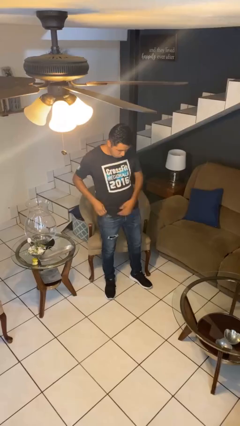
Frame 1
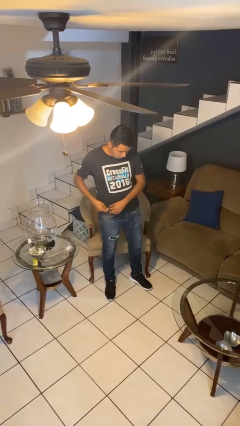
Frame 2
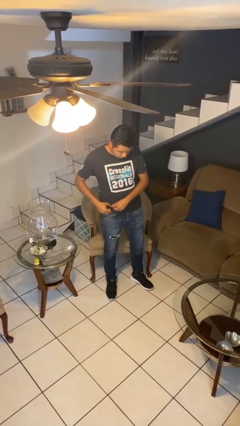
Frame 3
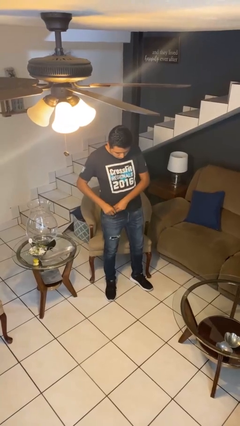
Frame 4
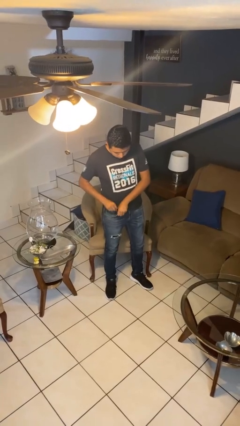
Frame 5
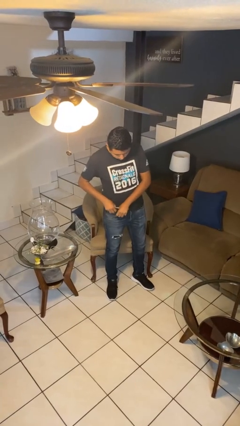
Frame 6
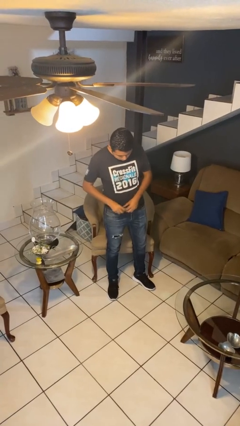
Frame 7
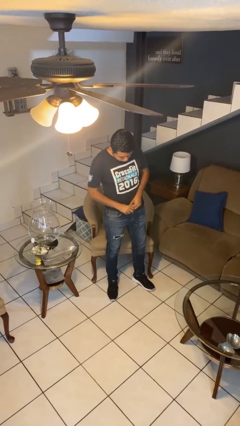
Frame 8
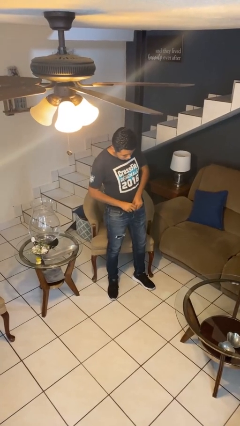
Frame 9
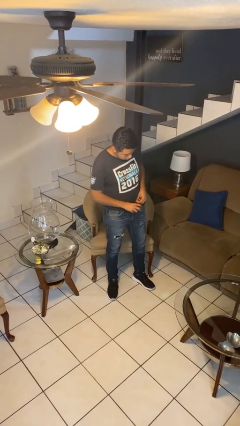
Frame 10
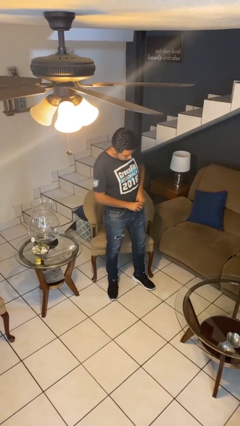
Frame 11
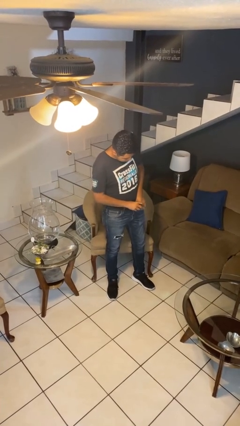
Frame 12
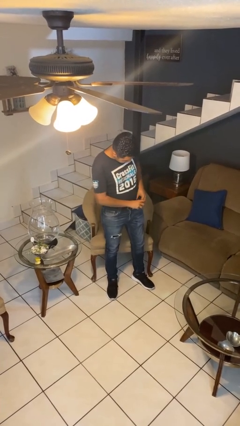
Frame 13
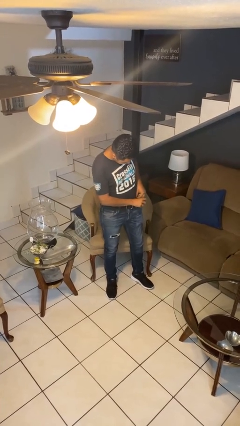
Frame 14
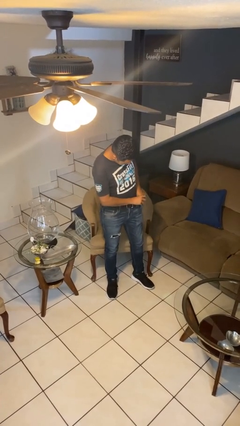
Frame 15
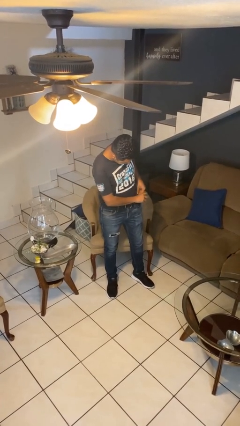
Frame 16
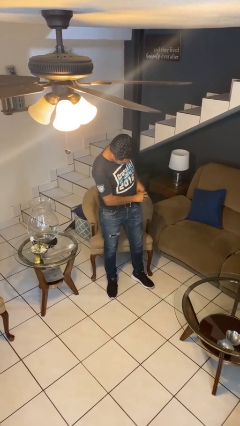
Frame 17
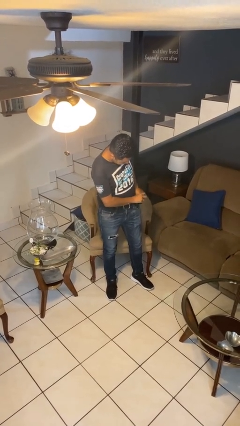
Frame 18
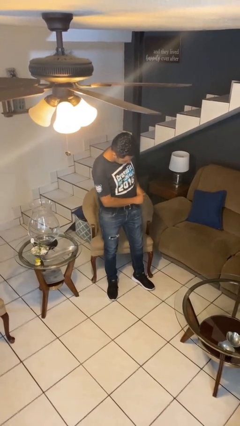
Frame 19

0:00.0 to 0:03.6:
person tucks in shirt

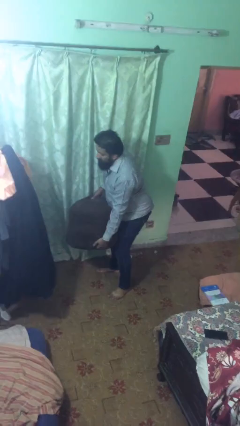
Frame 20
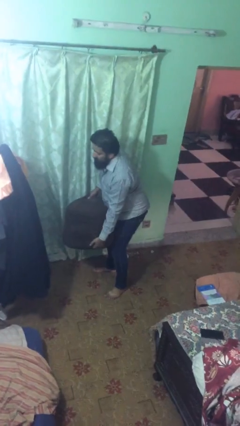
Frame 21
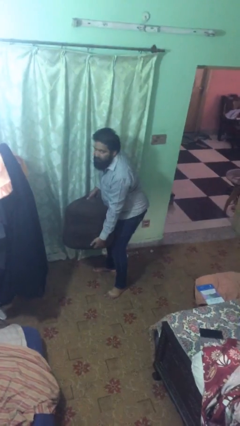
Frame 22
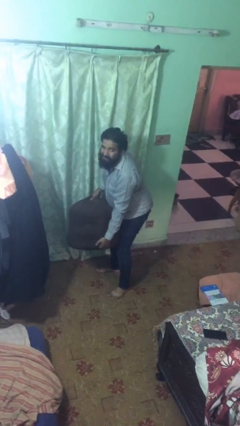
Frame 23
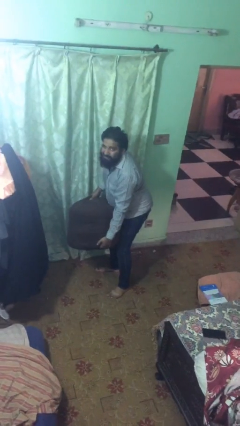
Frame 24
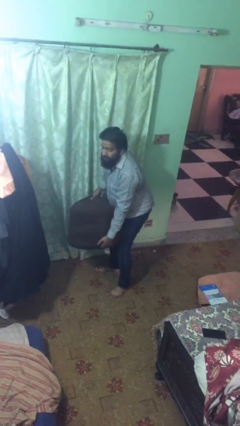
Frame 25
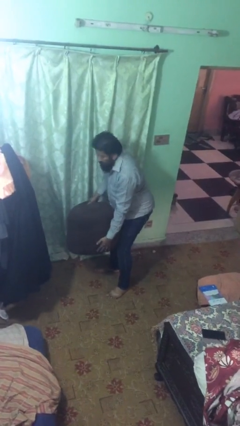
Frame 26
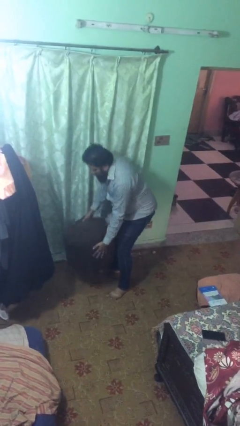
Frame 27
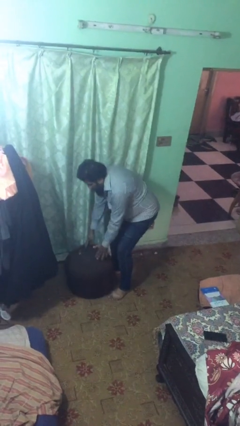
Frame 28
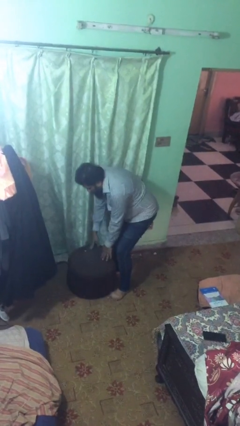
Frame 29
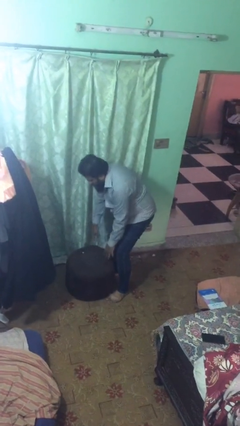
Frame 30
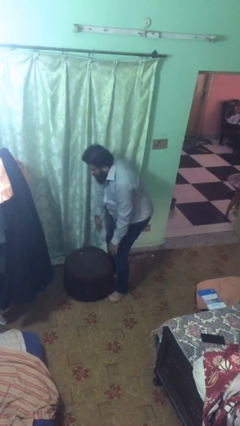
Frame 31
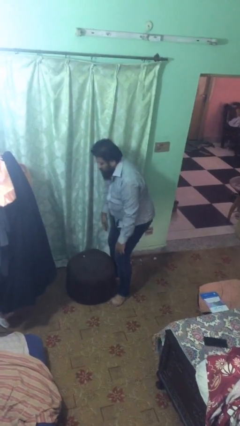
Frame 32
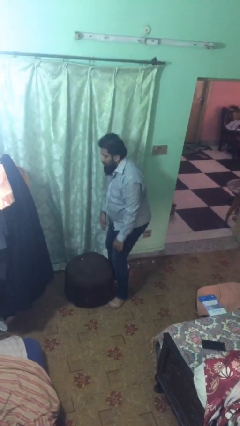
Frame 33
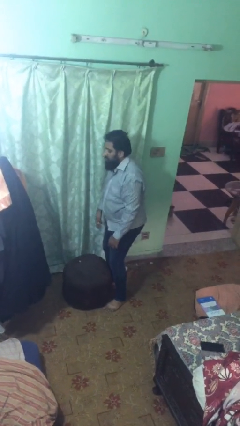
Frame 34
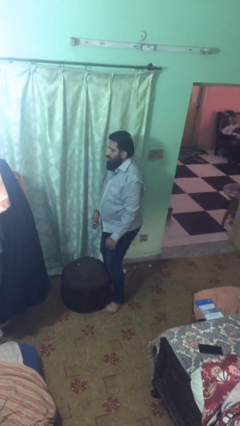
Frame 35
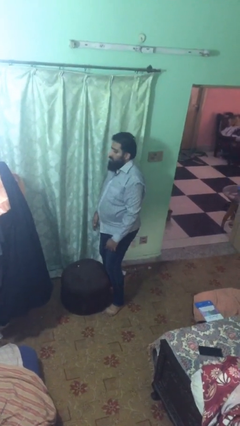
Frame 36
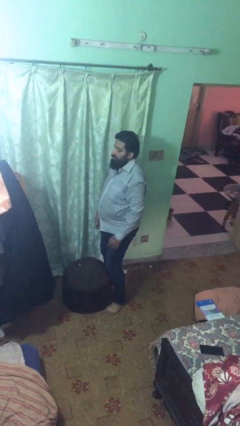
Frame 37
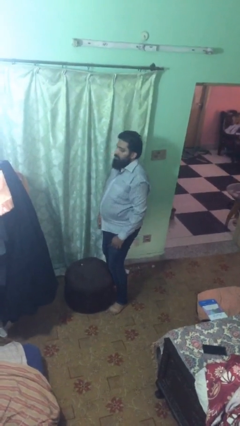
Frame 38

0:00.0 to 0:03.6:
person puts down object on floor

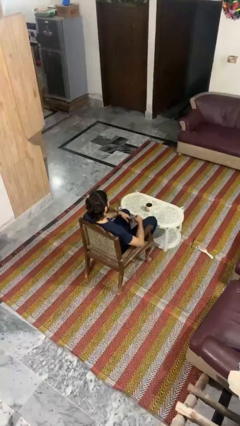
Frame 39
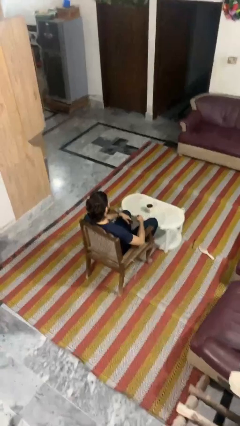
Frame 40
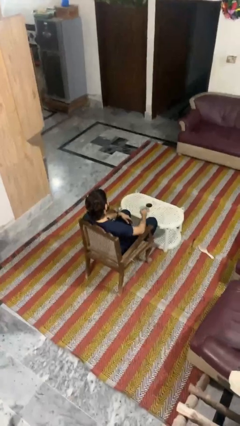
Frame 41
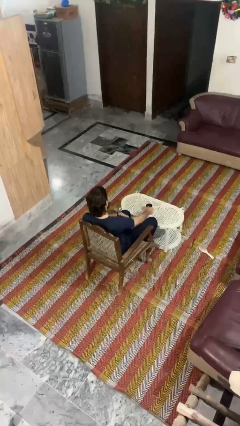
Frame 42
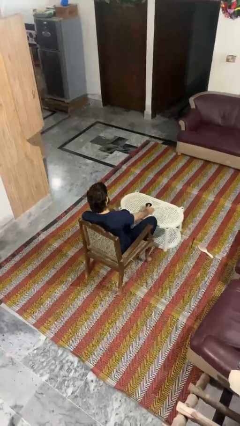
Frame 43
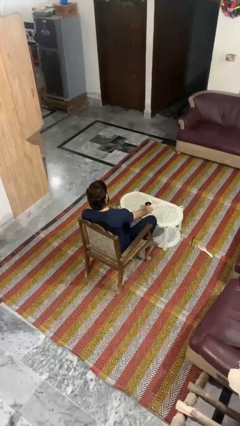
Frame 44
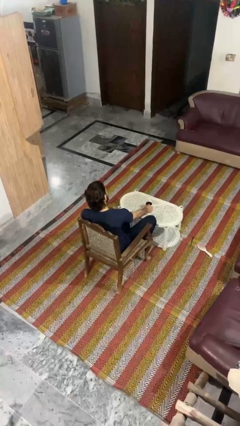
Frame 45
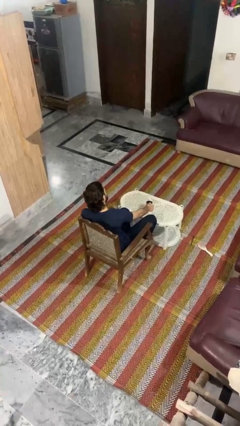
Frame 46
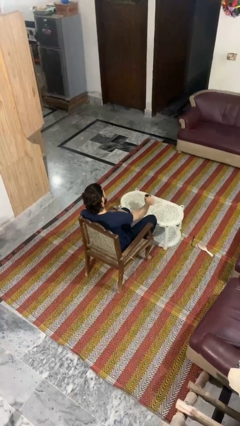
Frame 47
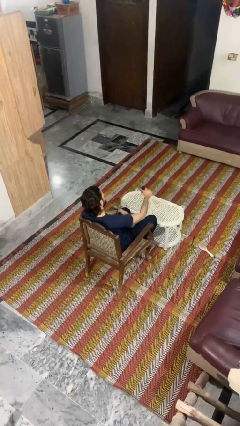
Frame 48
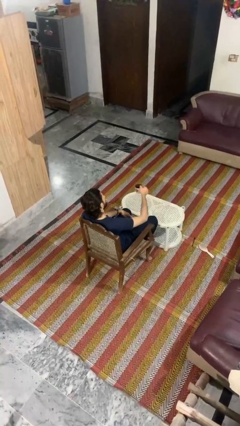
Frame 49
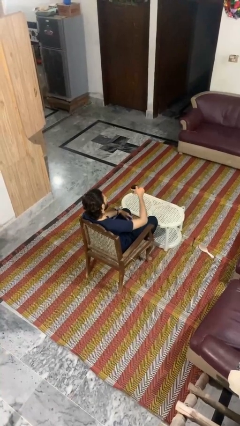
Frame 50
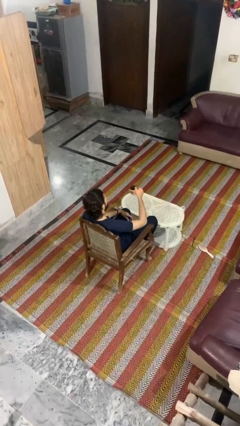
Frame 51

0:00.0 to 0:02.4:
person picks up object from table

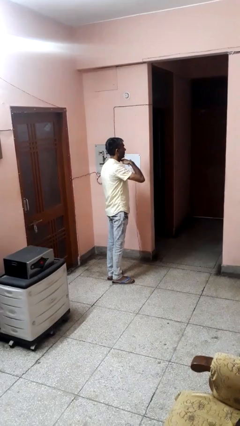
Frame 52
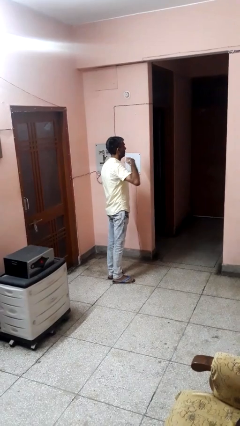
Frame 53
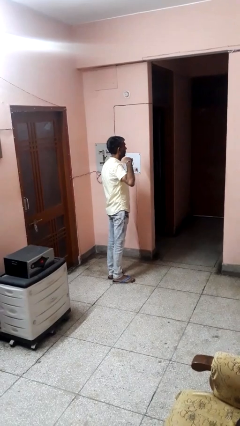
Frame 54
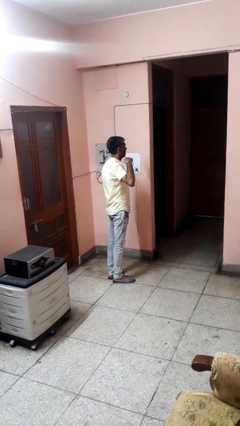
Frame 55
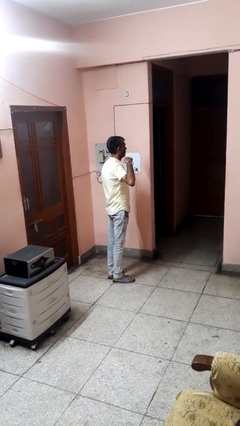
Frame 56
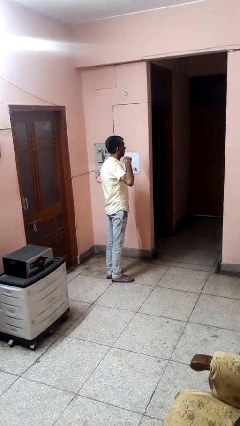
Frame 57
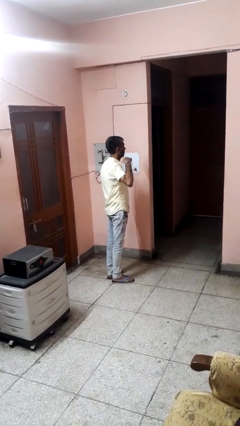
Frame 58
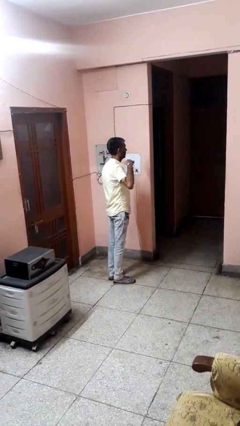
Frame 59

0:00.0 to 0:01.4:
person gestures cut

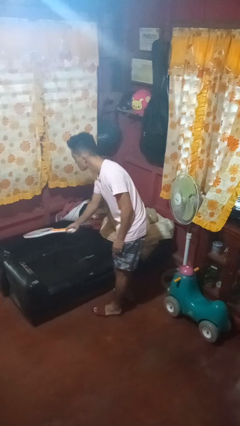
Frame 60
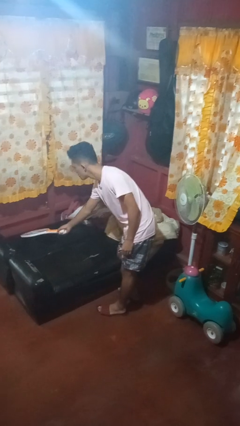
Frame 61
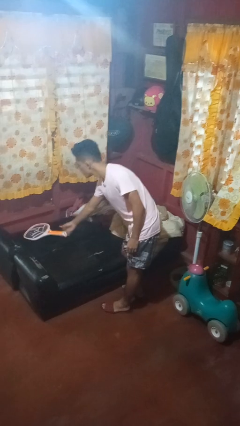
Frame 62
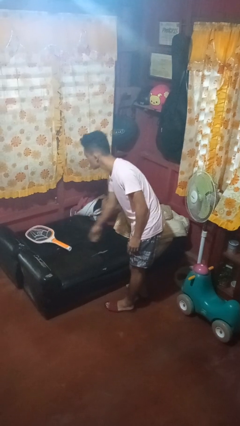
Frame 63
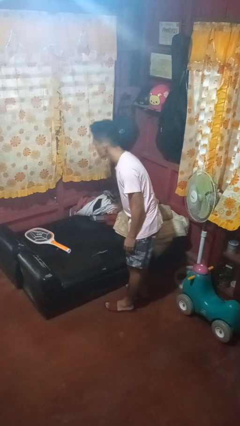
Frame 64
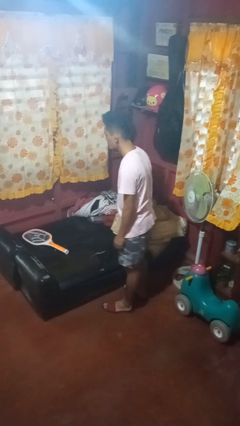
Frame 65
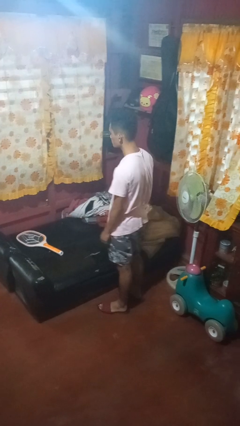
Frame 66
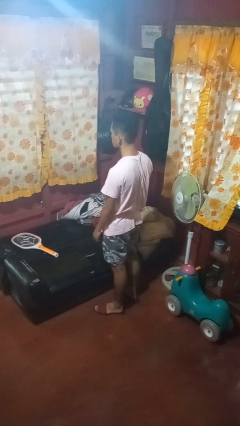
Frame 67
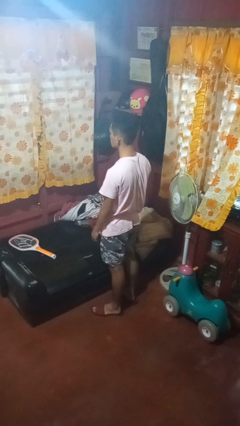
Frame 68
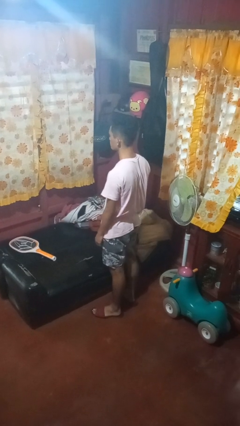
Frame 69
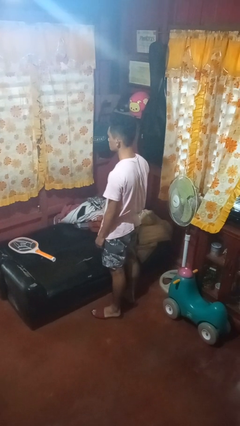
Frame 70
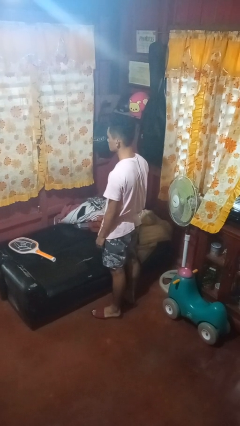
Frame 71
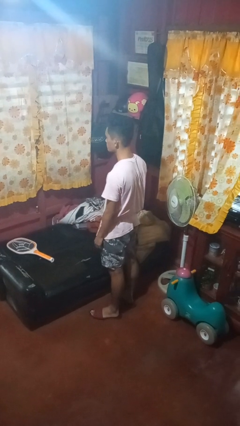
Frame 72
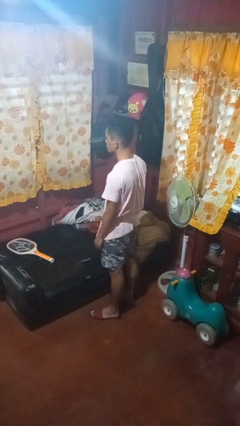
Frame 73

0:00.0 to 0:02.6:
person puts down object on couch

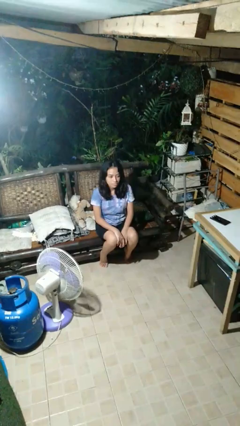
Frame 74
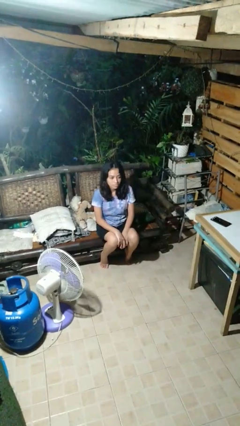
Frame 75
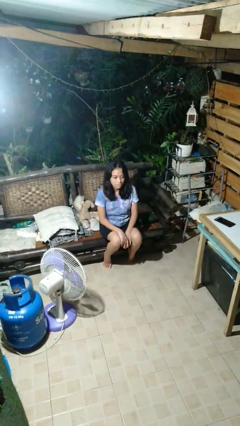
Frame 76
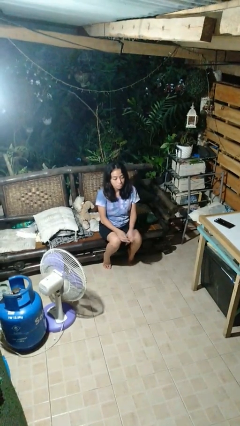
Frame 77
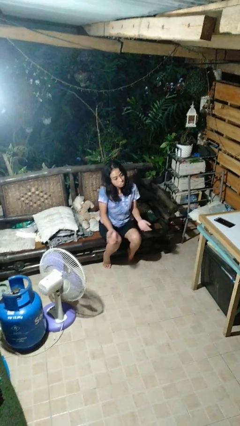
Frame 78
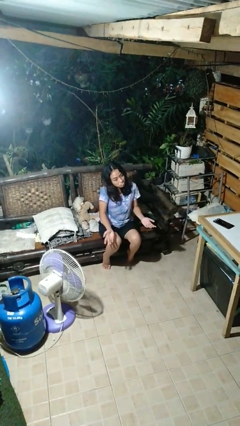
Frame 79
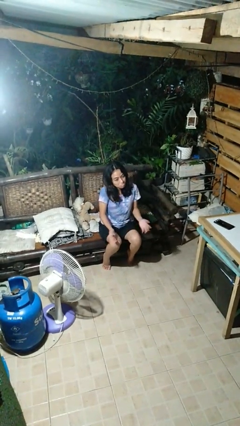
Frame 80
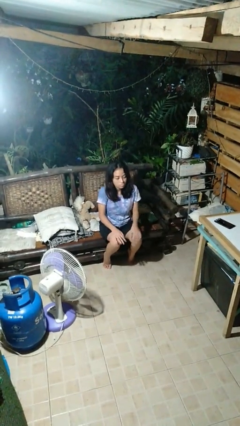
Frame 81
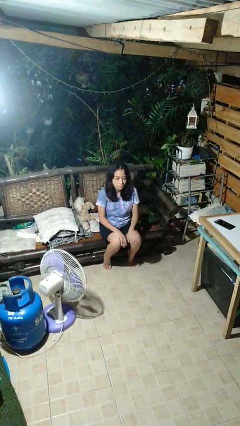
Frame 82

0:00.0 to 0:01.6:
person shrugs

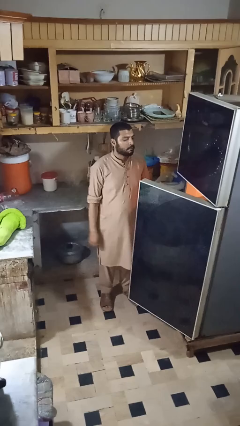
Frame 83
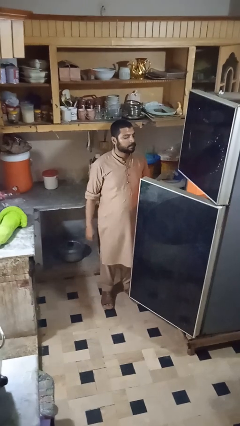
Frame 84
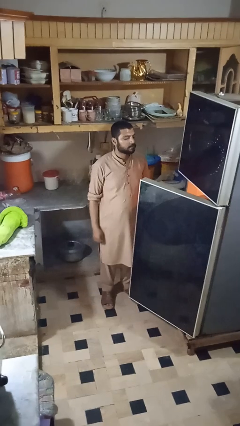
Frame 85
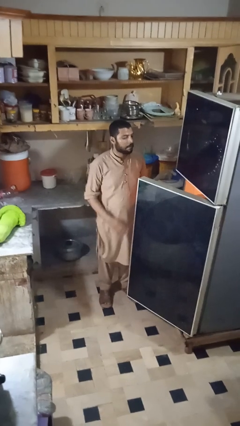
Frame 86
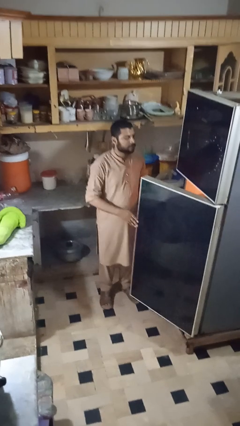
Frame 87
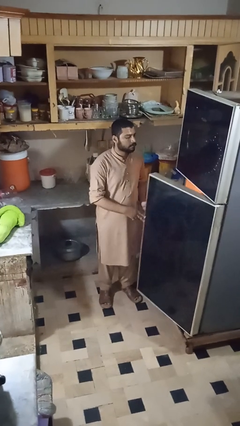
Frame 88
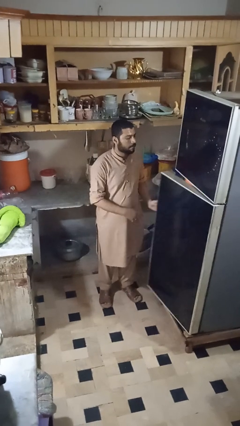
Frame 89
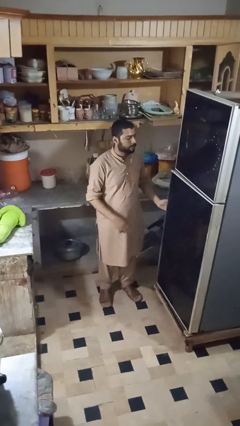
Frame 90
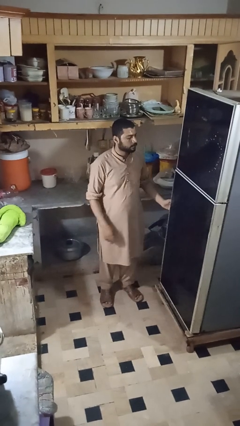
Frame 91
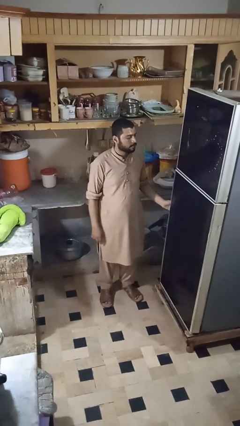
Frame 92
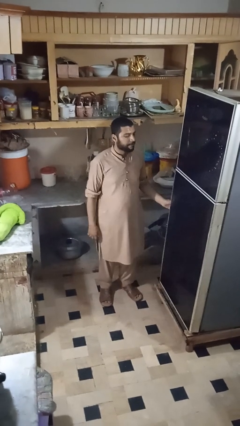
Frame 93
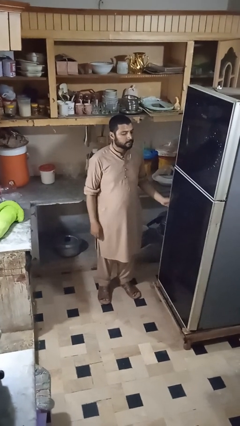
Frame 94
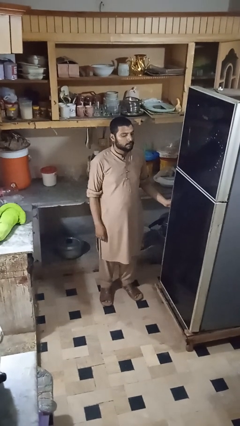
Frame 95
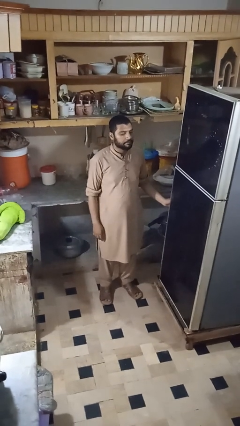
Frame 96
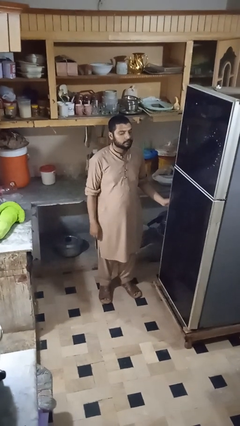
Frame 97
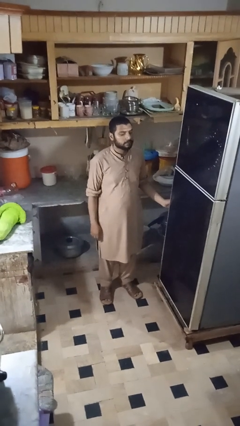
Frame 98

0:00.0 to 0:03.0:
person closes refrigerator
